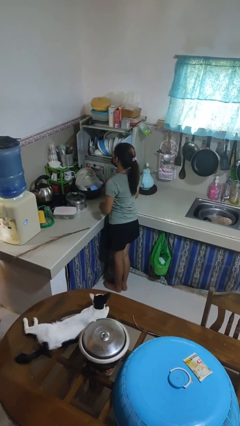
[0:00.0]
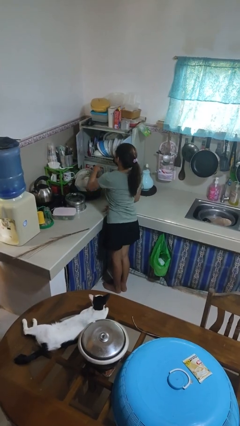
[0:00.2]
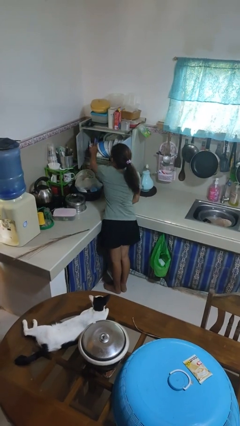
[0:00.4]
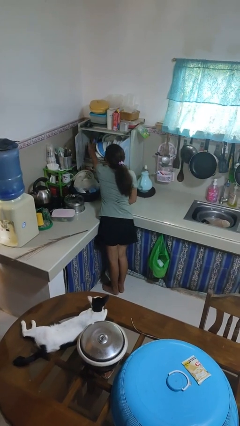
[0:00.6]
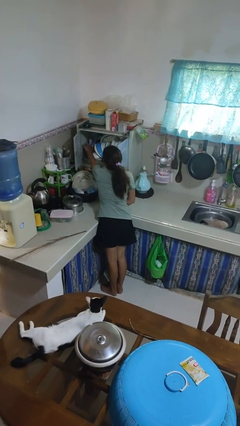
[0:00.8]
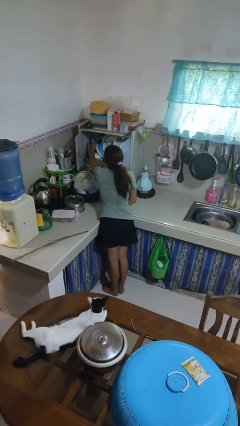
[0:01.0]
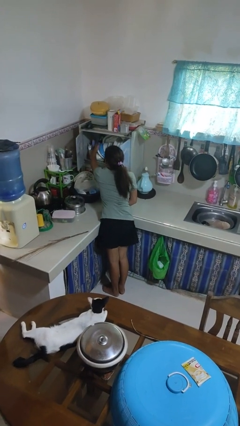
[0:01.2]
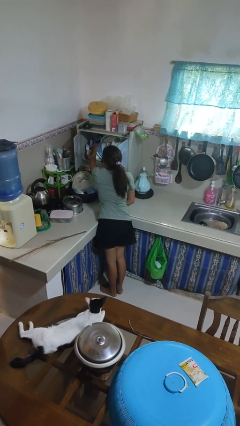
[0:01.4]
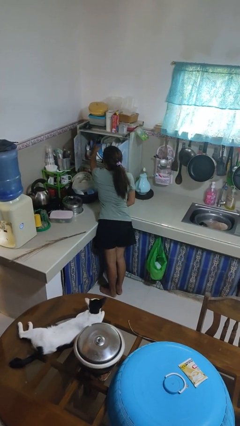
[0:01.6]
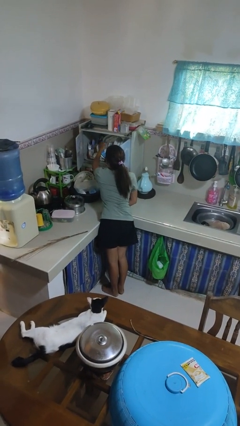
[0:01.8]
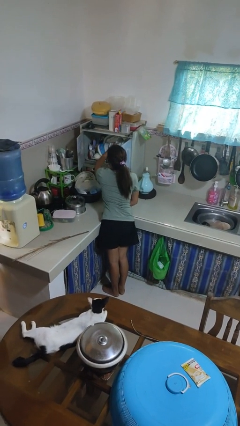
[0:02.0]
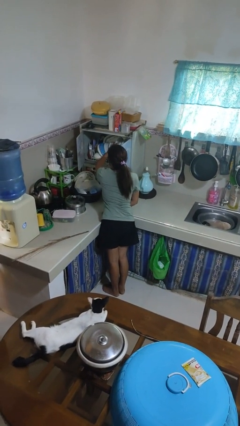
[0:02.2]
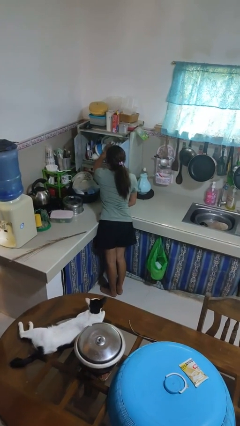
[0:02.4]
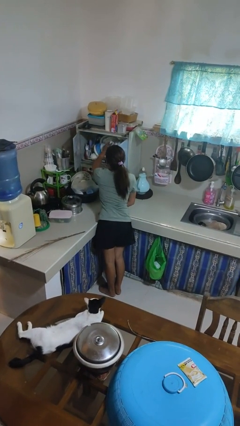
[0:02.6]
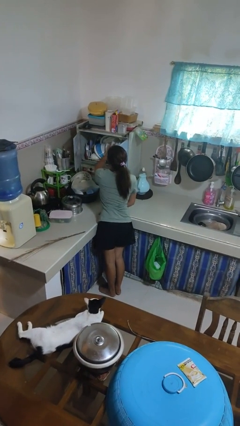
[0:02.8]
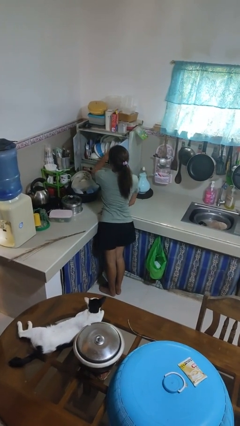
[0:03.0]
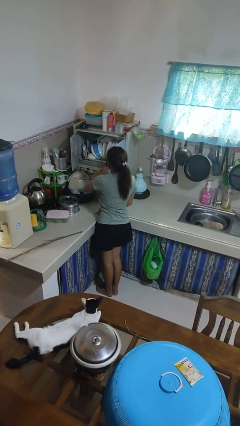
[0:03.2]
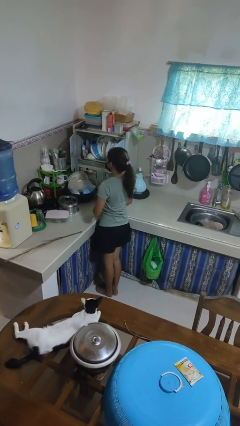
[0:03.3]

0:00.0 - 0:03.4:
person searches in kitchen drawer

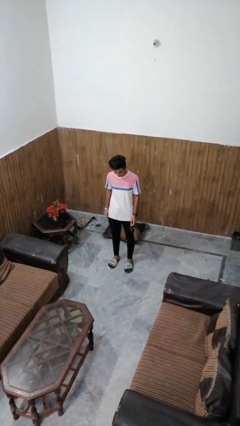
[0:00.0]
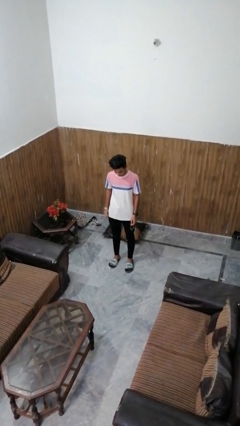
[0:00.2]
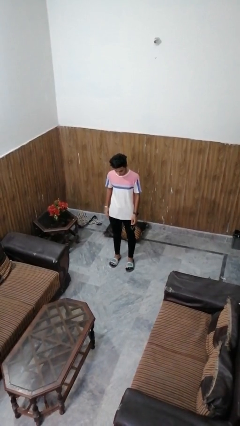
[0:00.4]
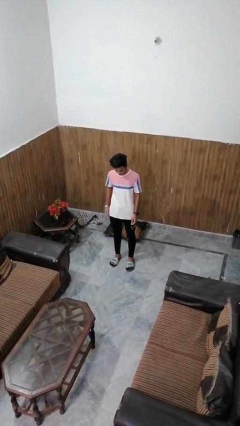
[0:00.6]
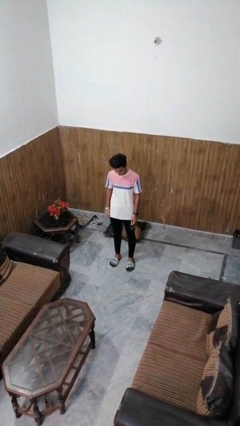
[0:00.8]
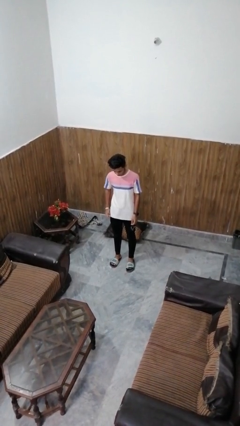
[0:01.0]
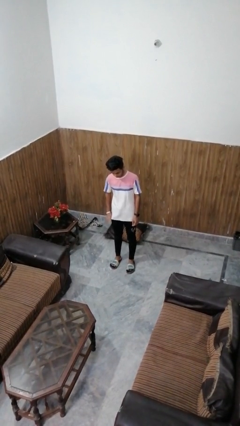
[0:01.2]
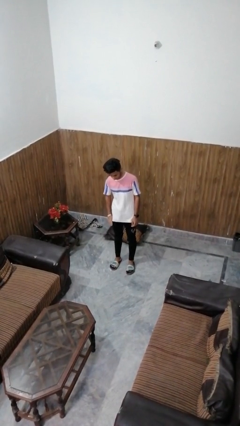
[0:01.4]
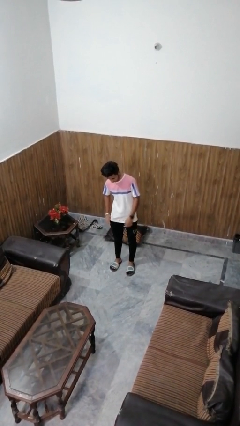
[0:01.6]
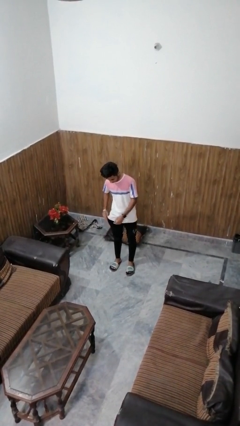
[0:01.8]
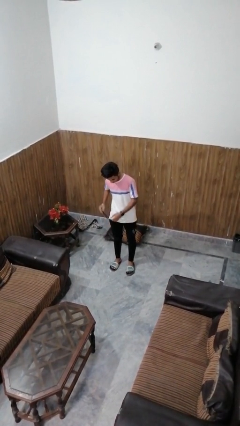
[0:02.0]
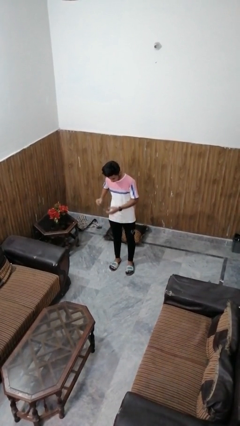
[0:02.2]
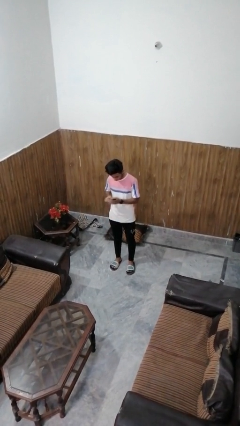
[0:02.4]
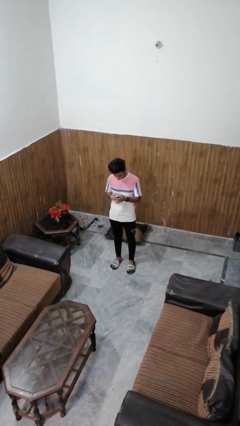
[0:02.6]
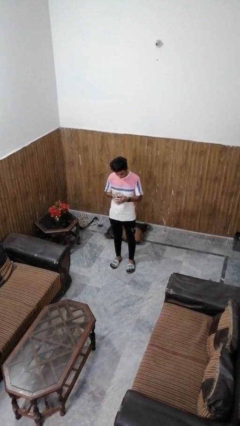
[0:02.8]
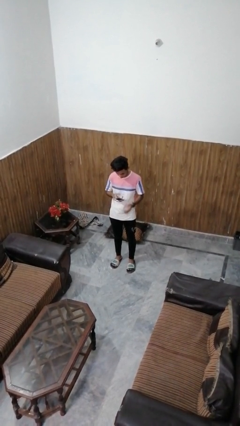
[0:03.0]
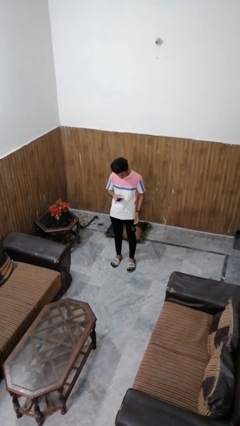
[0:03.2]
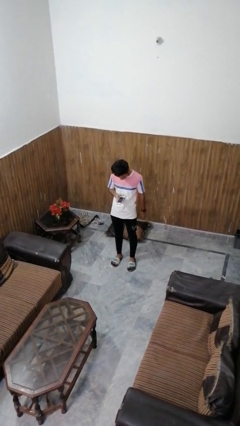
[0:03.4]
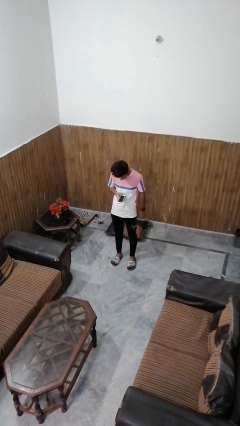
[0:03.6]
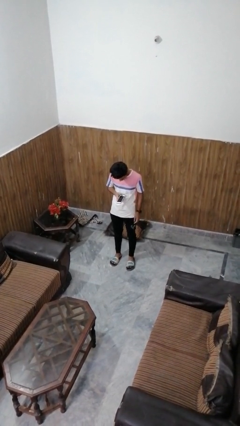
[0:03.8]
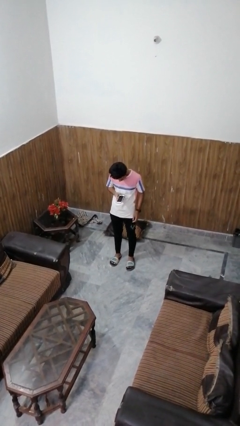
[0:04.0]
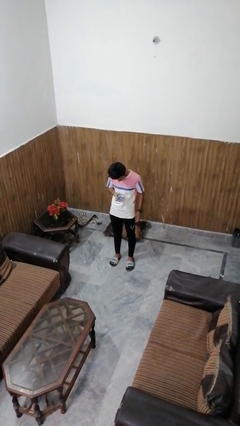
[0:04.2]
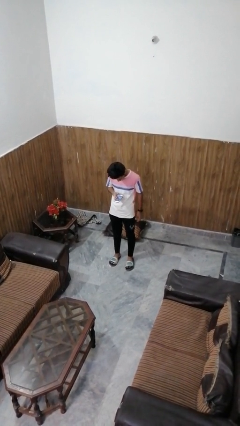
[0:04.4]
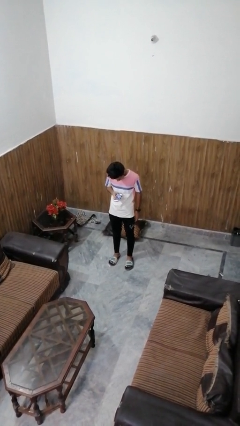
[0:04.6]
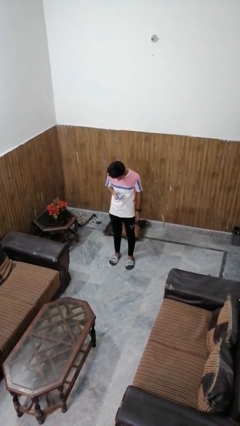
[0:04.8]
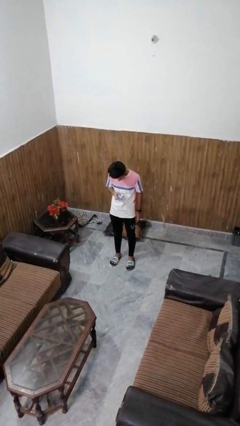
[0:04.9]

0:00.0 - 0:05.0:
person takes phone from pocket

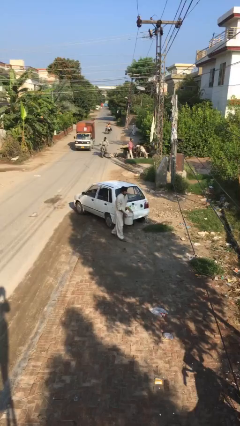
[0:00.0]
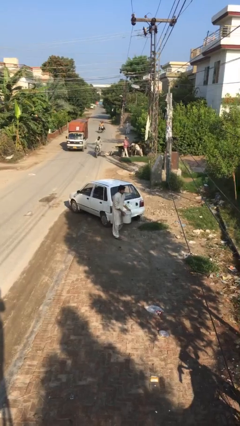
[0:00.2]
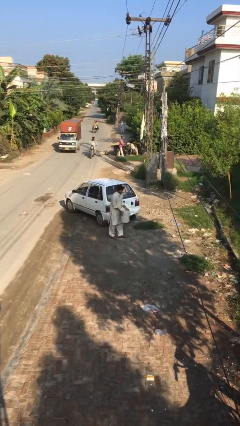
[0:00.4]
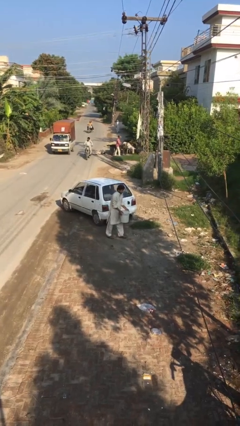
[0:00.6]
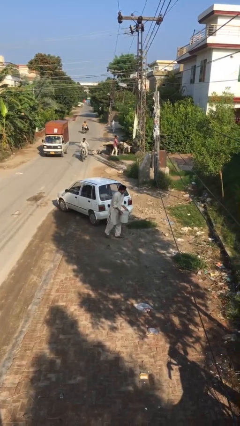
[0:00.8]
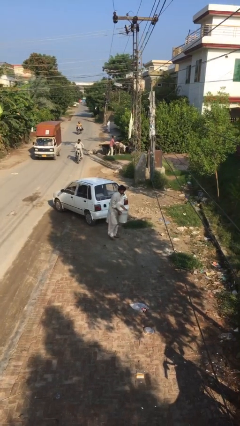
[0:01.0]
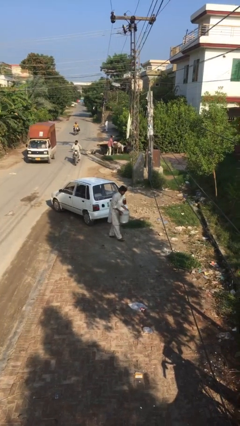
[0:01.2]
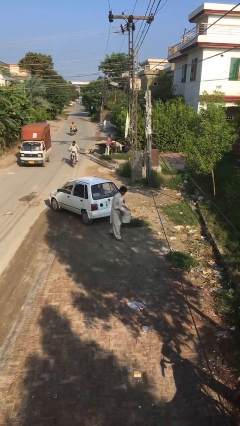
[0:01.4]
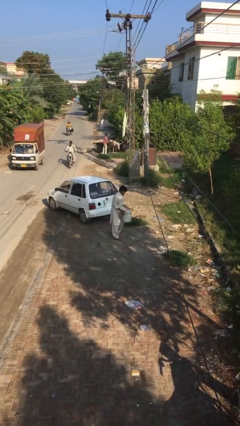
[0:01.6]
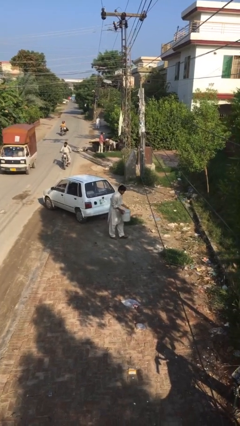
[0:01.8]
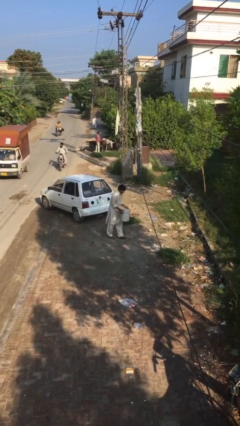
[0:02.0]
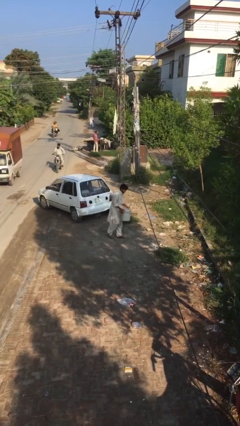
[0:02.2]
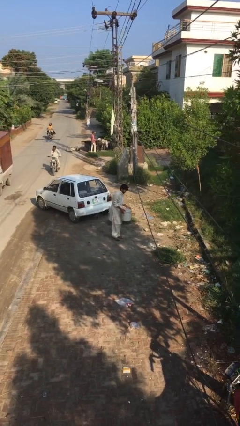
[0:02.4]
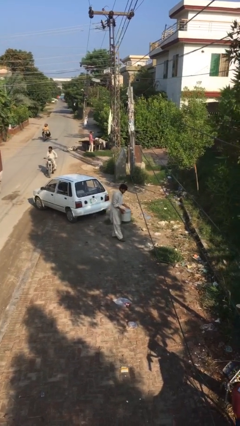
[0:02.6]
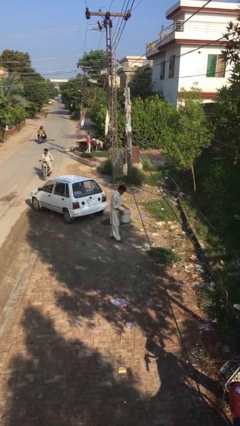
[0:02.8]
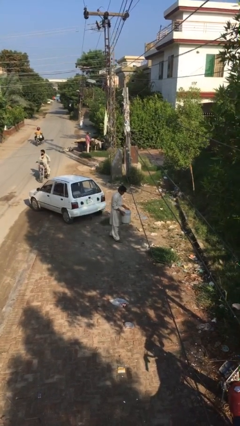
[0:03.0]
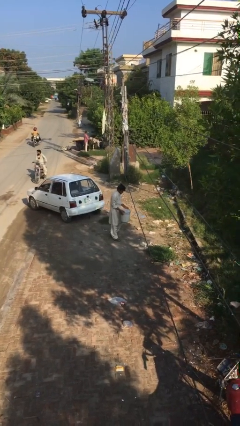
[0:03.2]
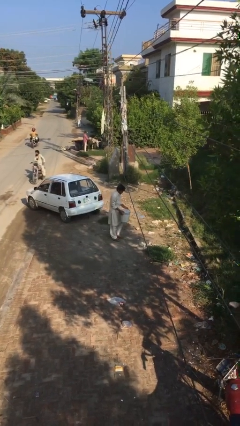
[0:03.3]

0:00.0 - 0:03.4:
person carries heavy object

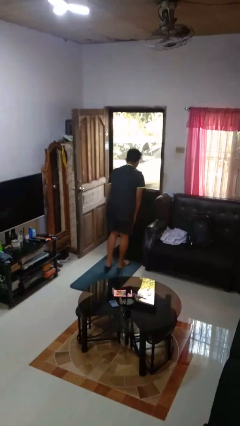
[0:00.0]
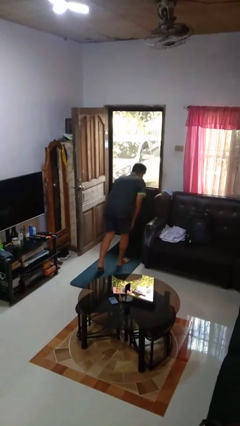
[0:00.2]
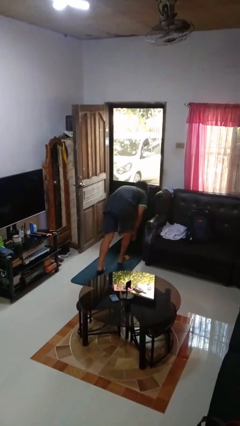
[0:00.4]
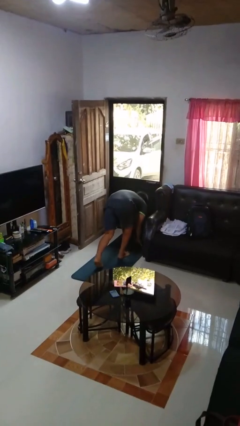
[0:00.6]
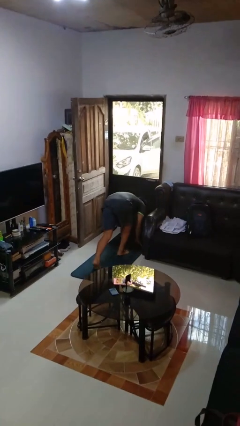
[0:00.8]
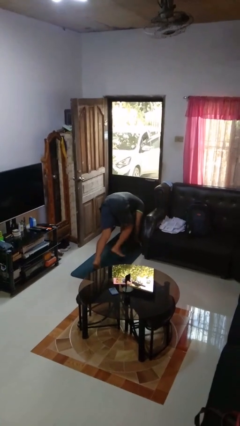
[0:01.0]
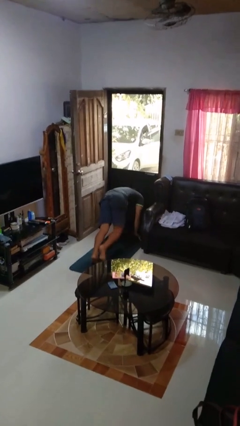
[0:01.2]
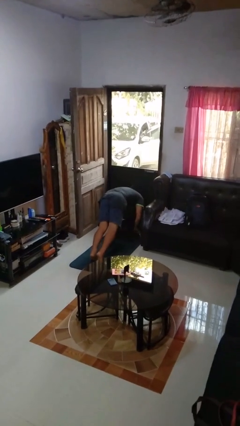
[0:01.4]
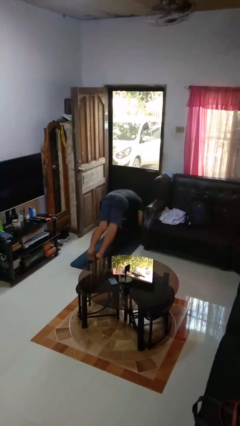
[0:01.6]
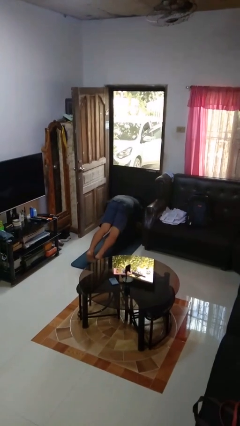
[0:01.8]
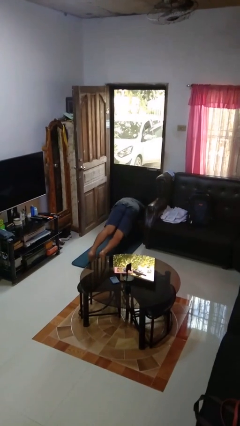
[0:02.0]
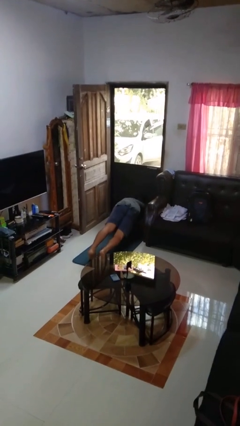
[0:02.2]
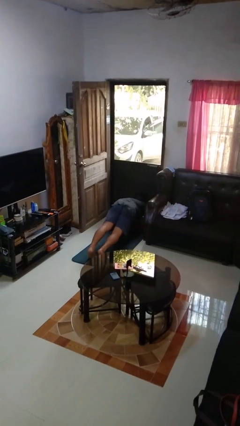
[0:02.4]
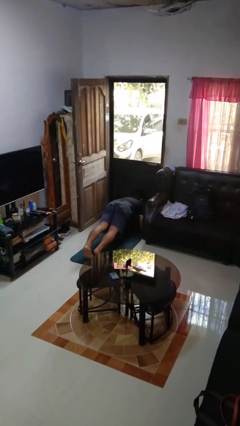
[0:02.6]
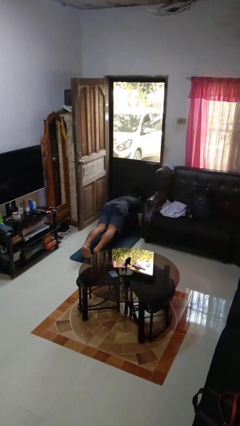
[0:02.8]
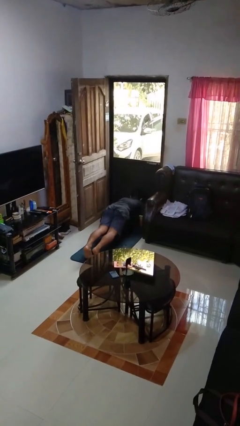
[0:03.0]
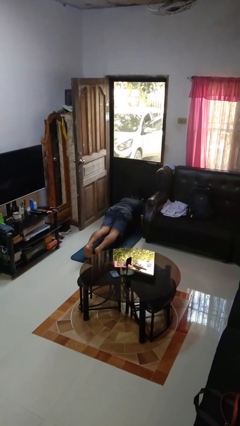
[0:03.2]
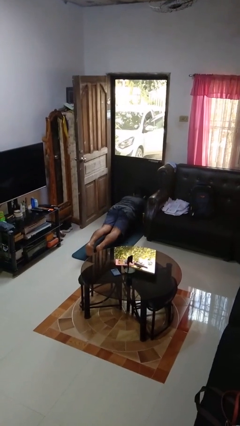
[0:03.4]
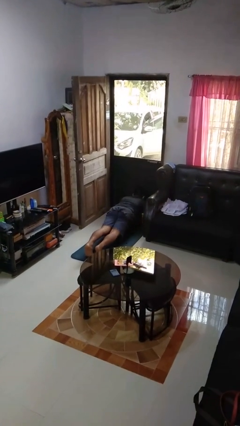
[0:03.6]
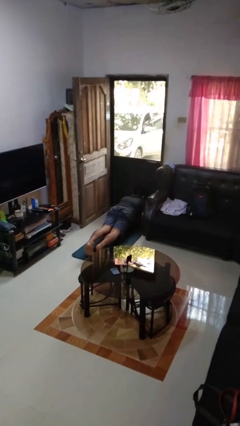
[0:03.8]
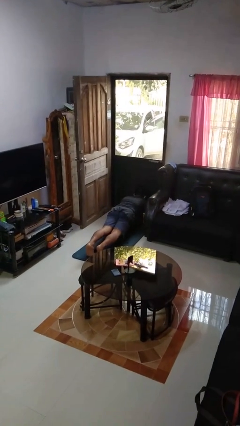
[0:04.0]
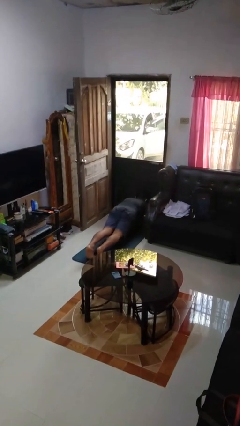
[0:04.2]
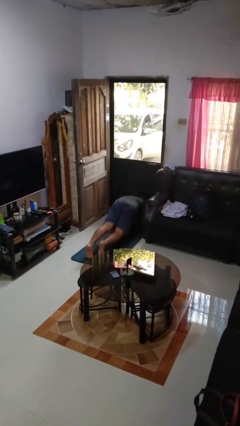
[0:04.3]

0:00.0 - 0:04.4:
person exercises with plank

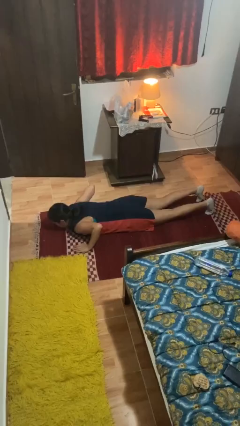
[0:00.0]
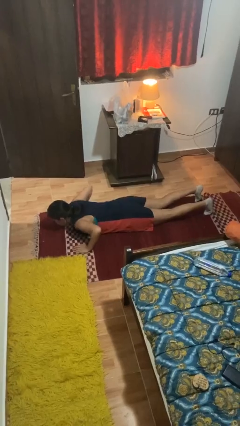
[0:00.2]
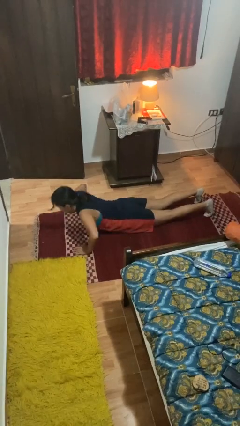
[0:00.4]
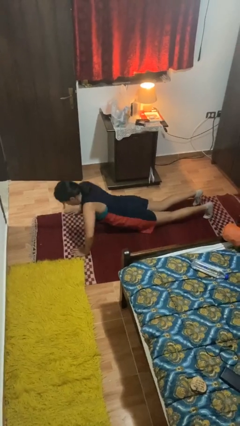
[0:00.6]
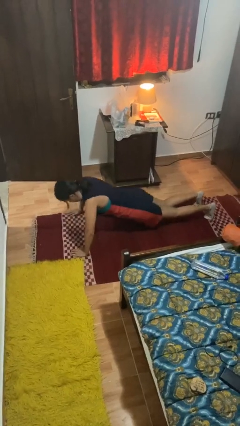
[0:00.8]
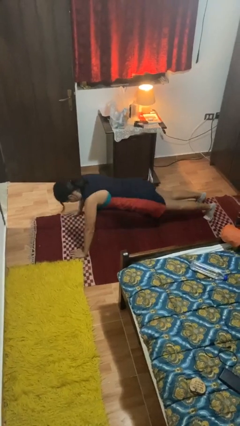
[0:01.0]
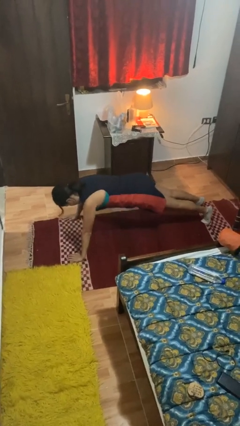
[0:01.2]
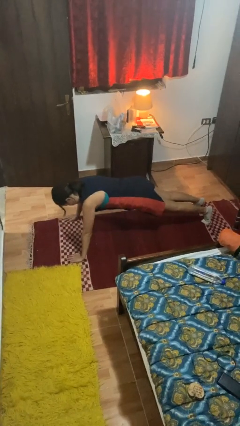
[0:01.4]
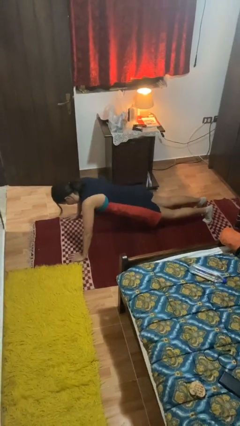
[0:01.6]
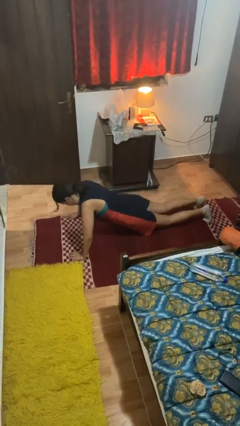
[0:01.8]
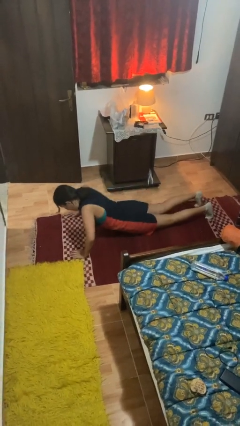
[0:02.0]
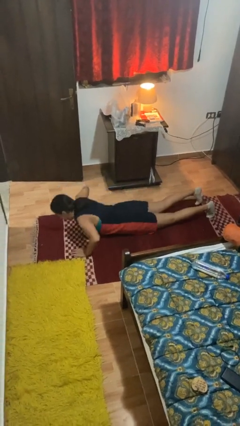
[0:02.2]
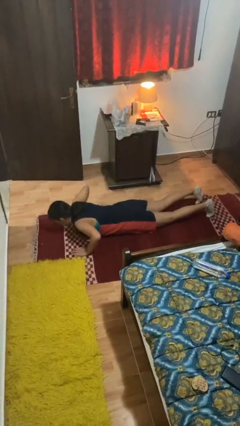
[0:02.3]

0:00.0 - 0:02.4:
person exercises with pushup
